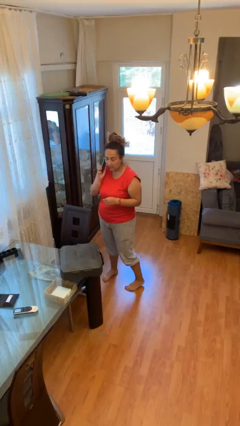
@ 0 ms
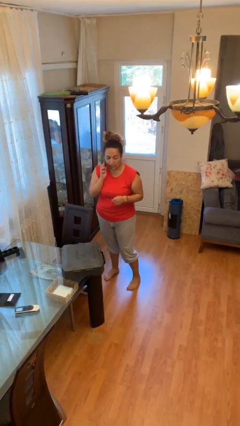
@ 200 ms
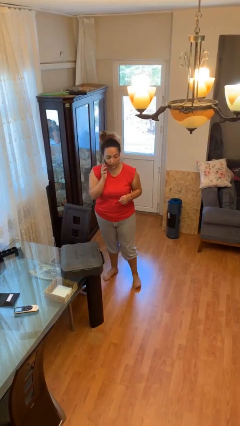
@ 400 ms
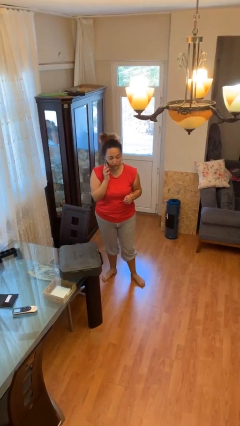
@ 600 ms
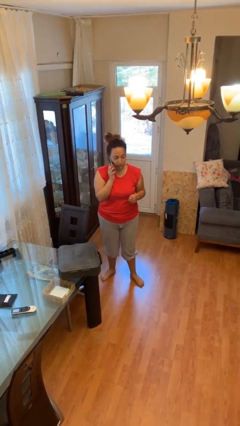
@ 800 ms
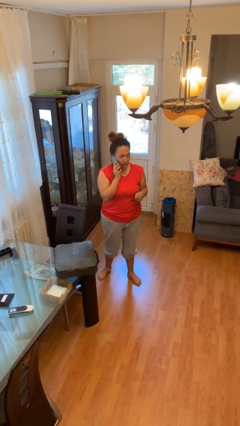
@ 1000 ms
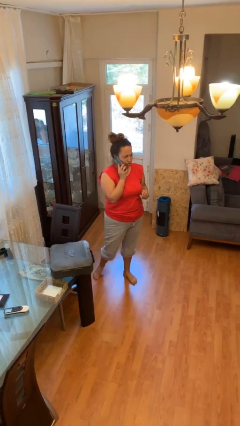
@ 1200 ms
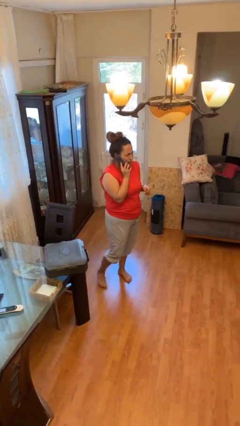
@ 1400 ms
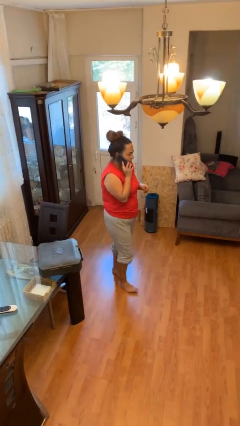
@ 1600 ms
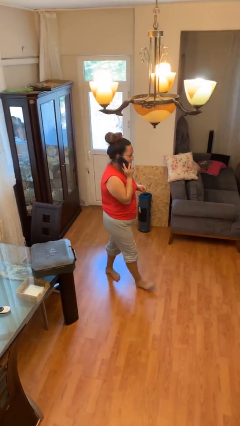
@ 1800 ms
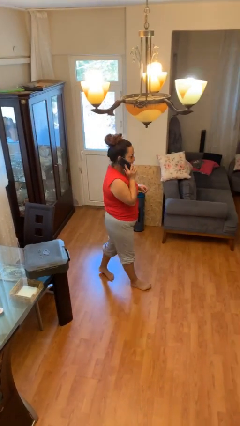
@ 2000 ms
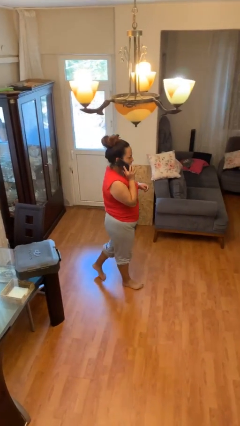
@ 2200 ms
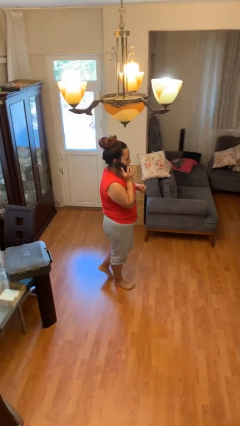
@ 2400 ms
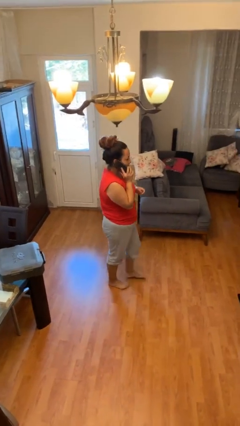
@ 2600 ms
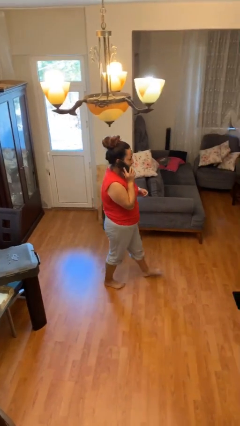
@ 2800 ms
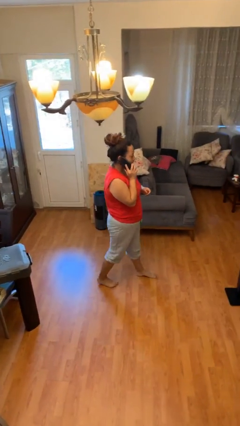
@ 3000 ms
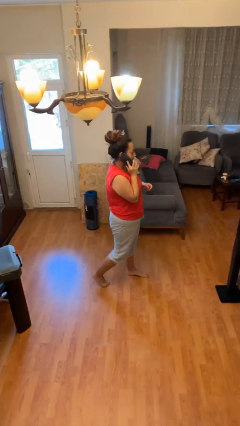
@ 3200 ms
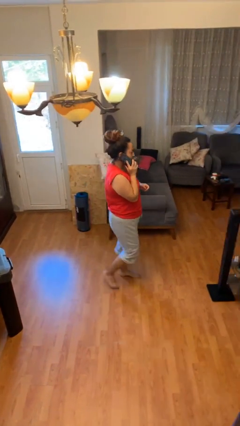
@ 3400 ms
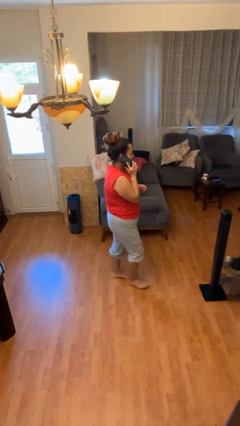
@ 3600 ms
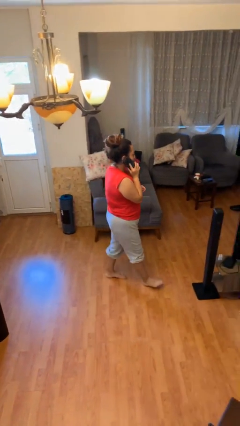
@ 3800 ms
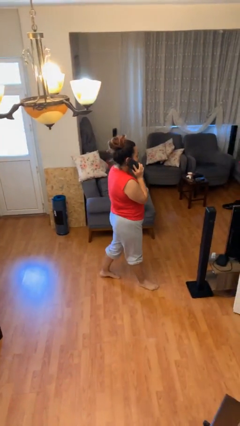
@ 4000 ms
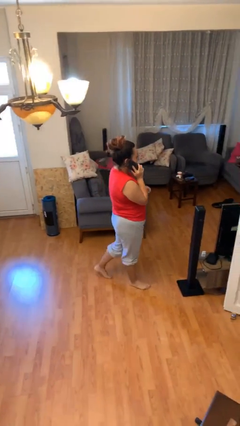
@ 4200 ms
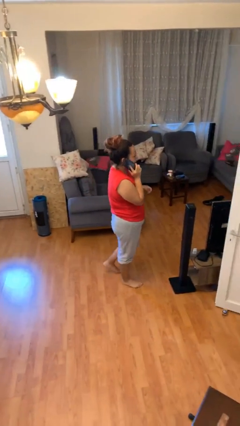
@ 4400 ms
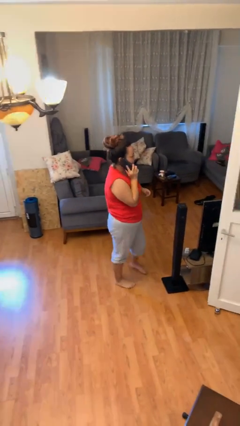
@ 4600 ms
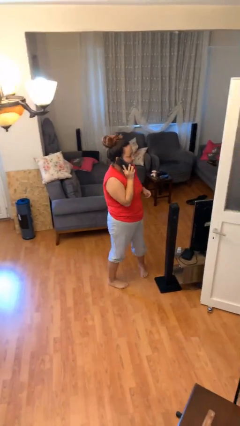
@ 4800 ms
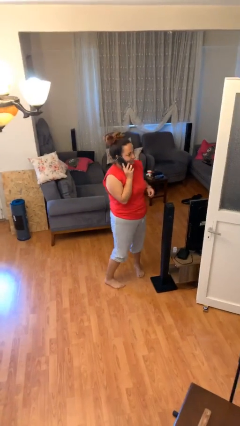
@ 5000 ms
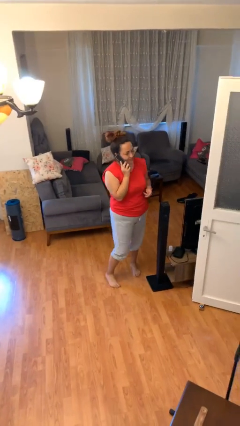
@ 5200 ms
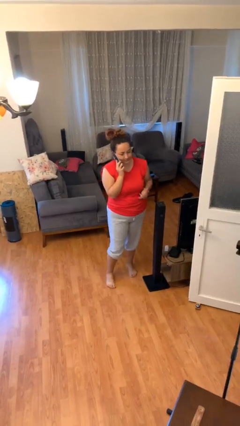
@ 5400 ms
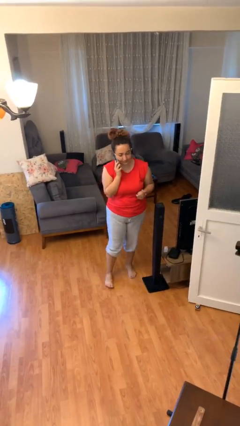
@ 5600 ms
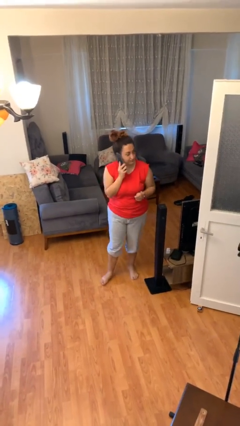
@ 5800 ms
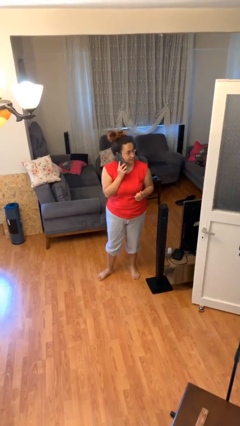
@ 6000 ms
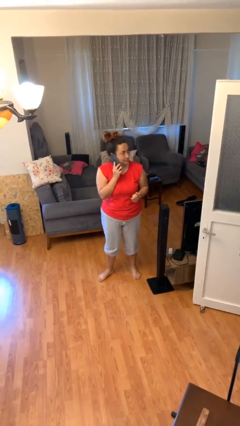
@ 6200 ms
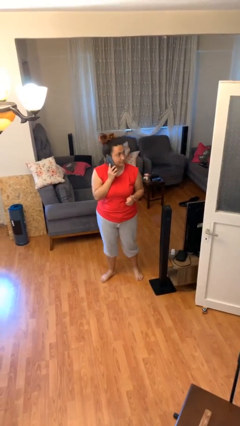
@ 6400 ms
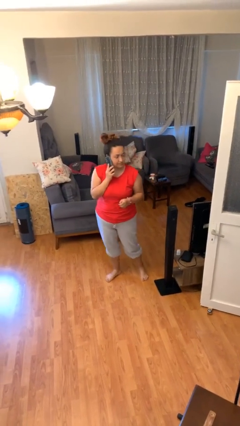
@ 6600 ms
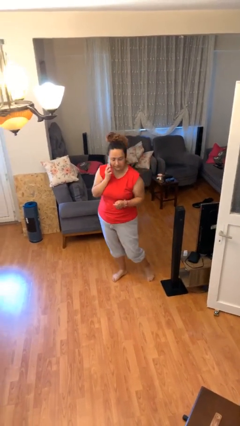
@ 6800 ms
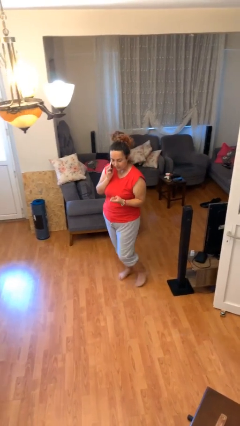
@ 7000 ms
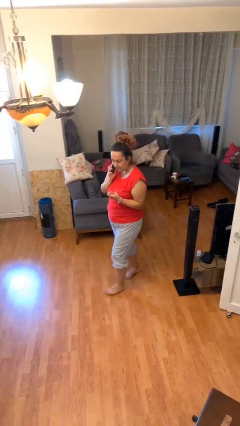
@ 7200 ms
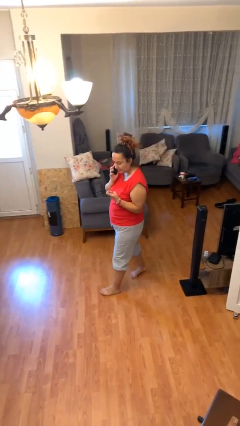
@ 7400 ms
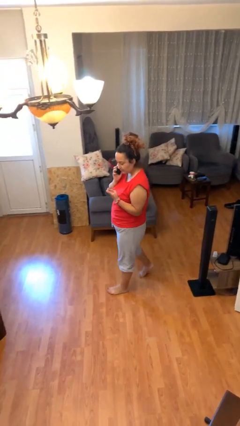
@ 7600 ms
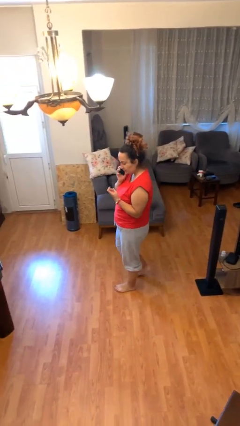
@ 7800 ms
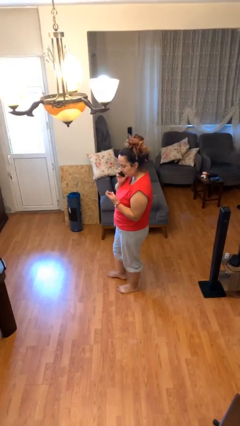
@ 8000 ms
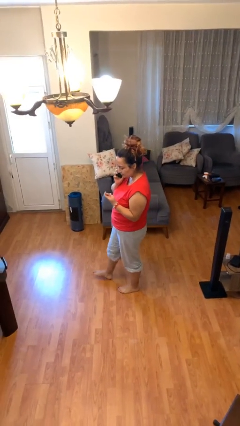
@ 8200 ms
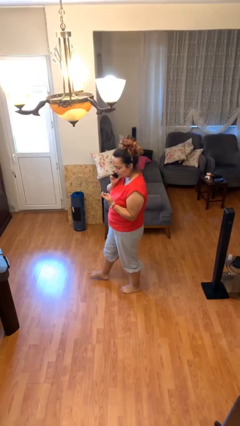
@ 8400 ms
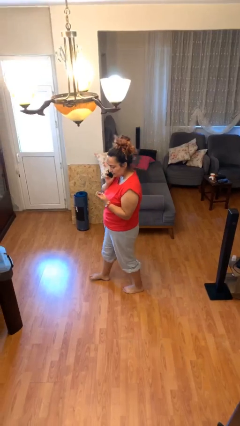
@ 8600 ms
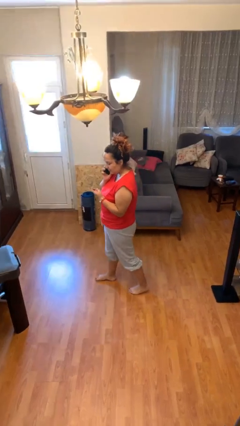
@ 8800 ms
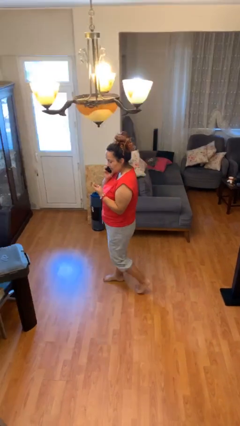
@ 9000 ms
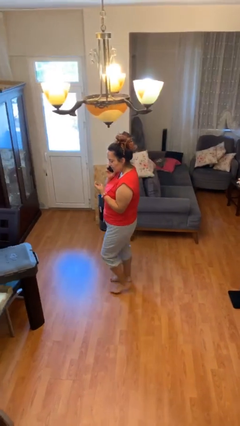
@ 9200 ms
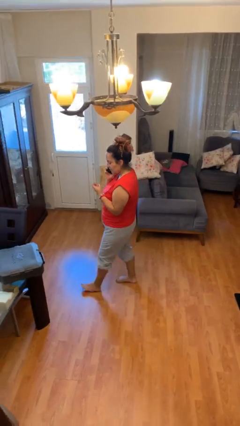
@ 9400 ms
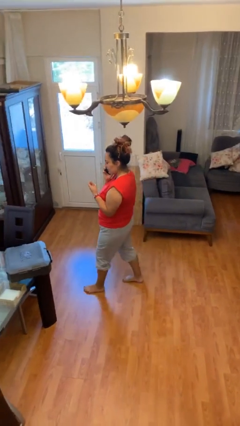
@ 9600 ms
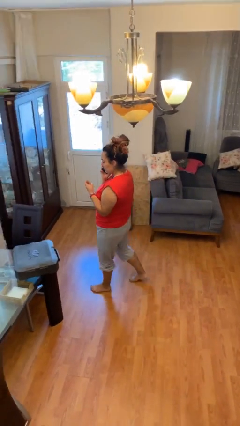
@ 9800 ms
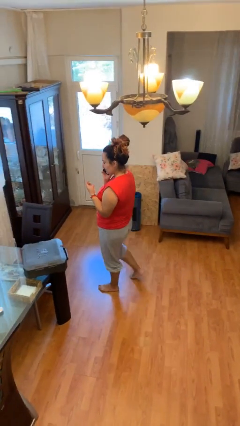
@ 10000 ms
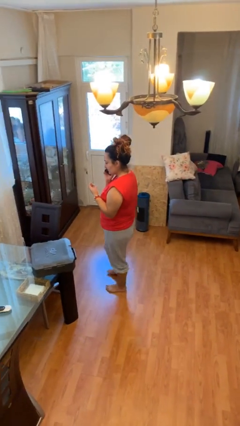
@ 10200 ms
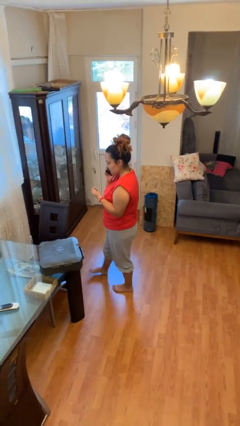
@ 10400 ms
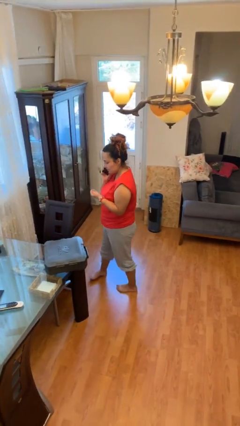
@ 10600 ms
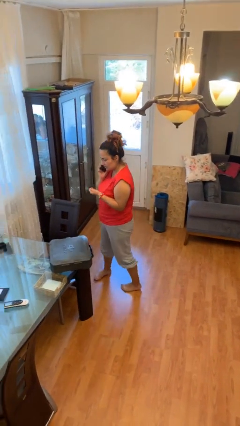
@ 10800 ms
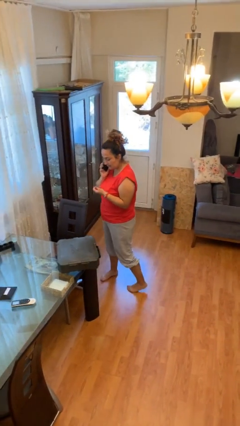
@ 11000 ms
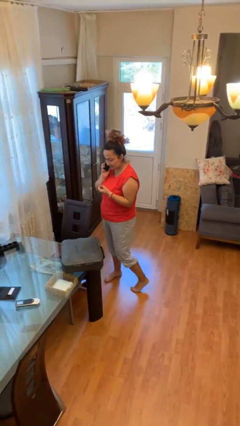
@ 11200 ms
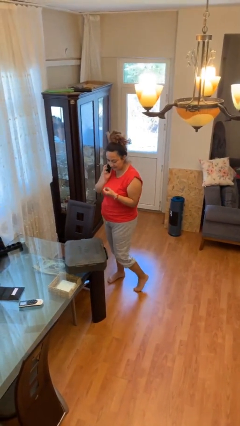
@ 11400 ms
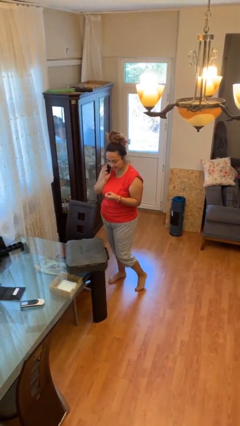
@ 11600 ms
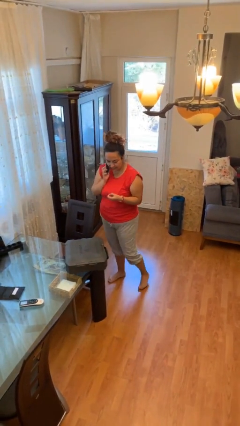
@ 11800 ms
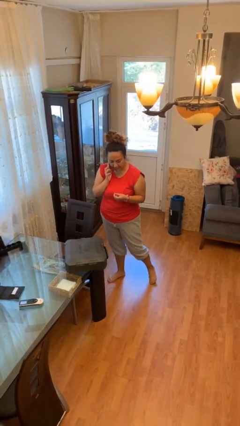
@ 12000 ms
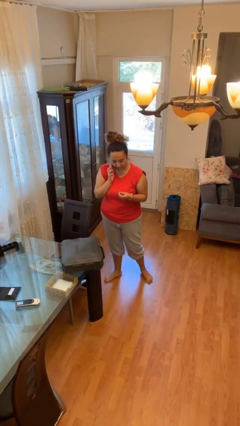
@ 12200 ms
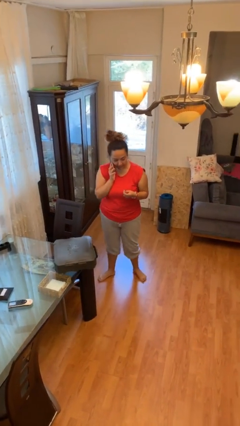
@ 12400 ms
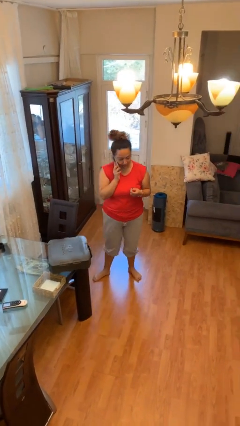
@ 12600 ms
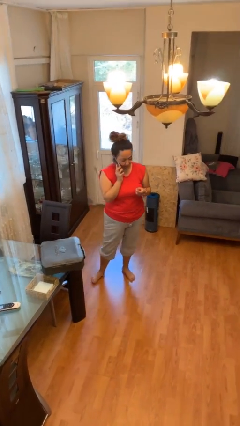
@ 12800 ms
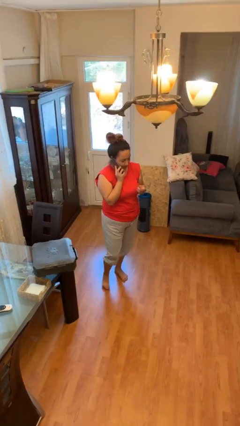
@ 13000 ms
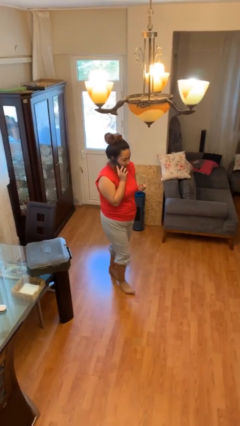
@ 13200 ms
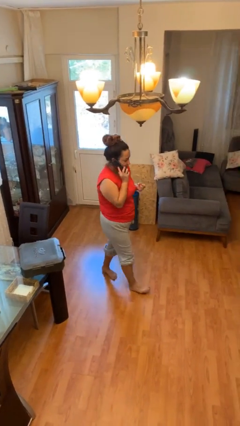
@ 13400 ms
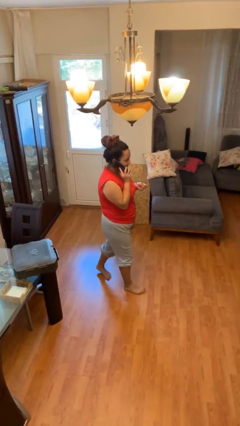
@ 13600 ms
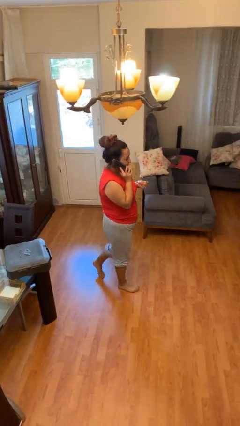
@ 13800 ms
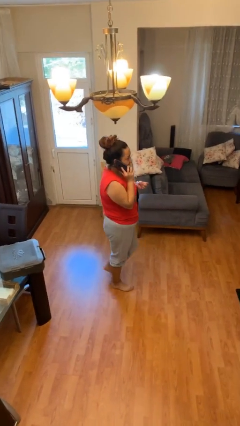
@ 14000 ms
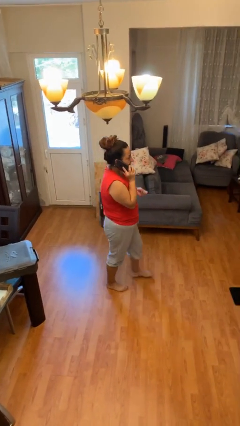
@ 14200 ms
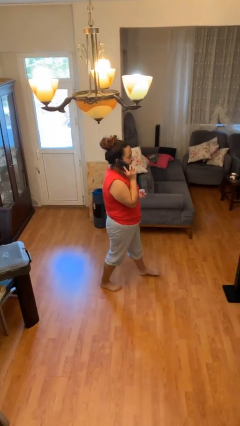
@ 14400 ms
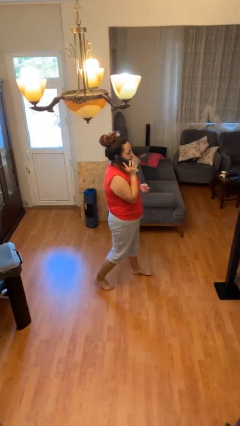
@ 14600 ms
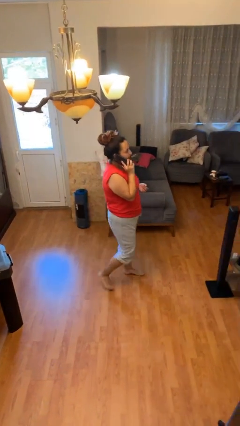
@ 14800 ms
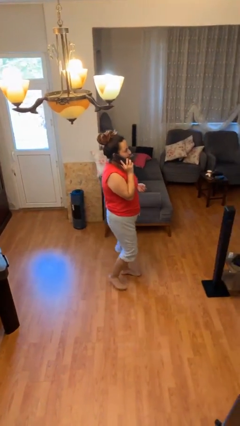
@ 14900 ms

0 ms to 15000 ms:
person talks on phone

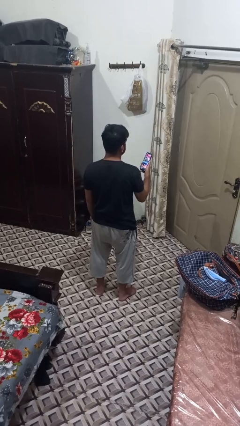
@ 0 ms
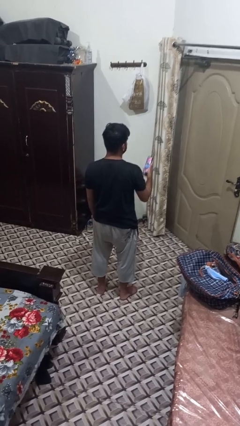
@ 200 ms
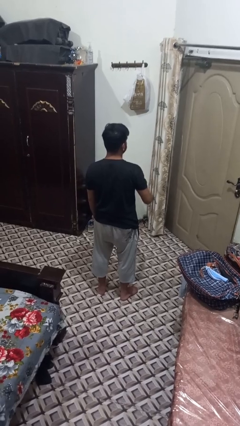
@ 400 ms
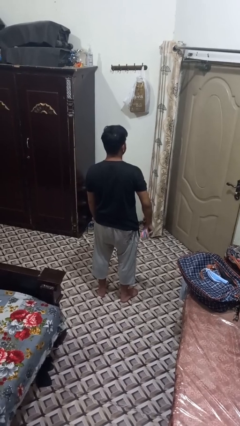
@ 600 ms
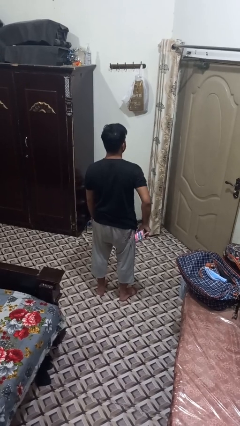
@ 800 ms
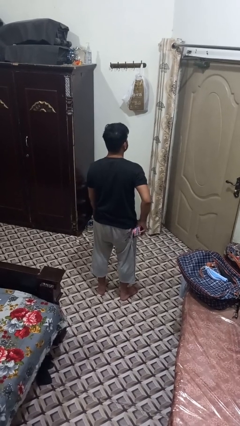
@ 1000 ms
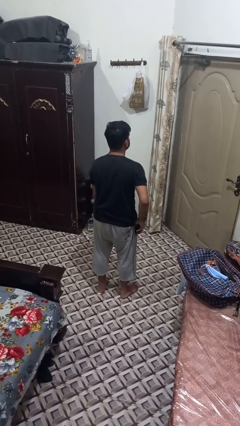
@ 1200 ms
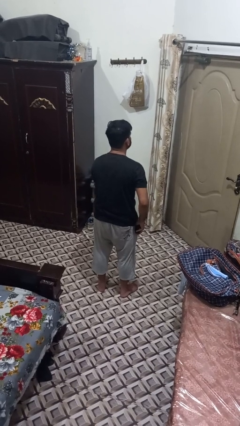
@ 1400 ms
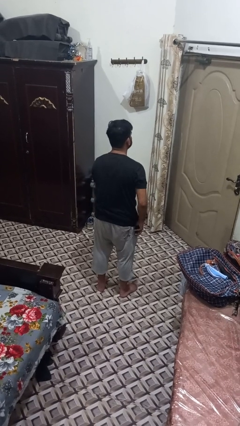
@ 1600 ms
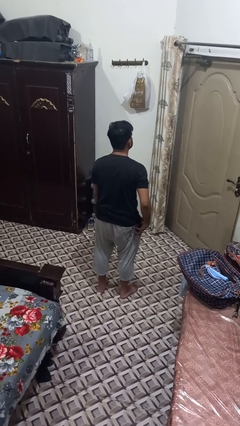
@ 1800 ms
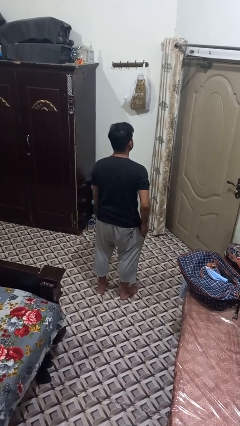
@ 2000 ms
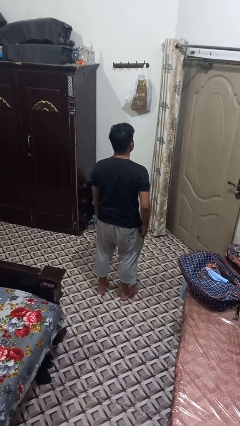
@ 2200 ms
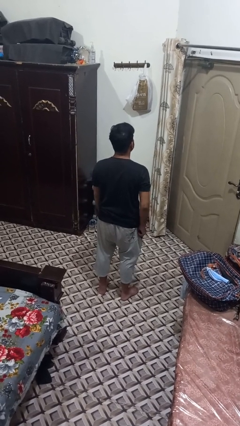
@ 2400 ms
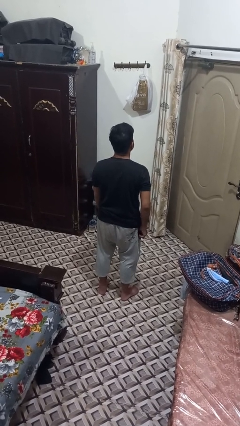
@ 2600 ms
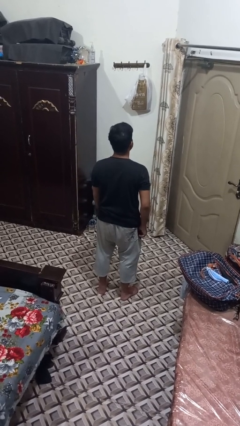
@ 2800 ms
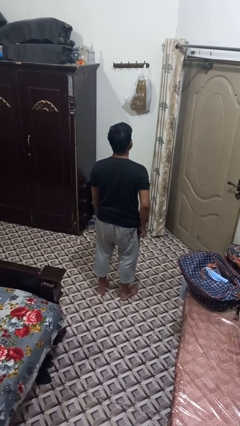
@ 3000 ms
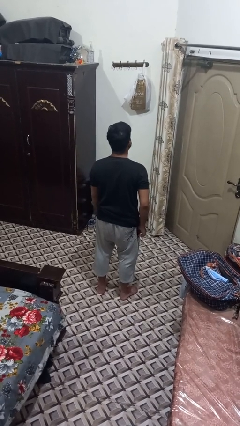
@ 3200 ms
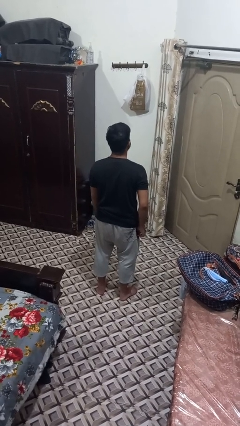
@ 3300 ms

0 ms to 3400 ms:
person puts phone into pocket
